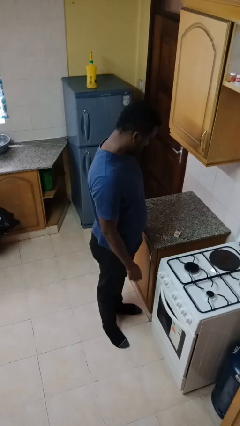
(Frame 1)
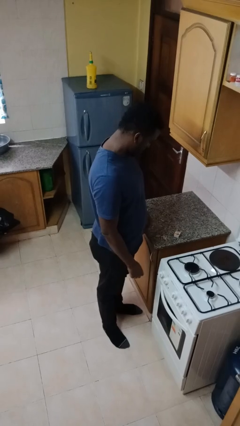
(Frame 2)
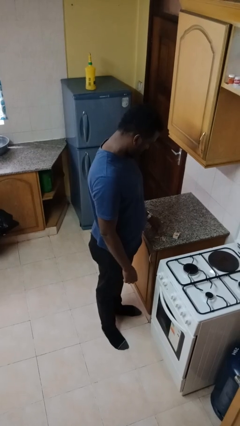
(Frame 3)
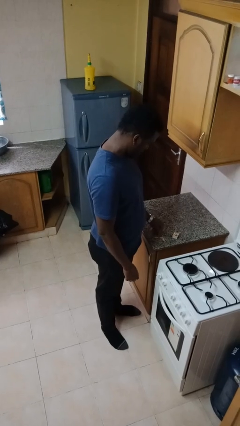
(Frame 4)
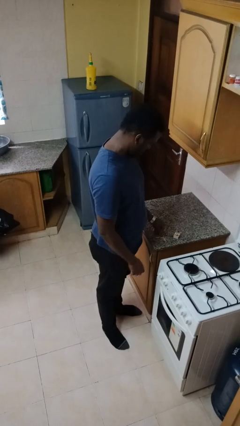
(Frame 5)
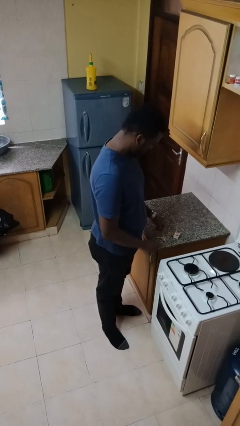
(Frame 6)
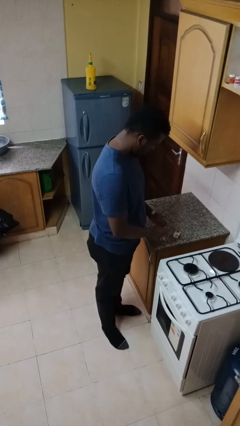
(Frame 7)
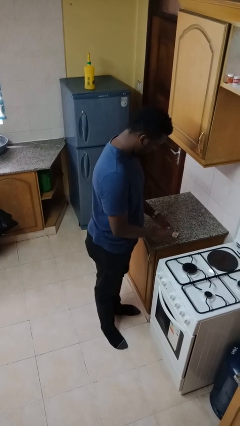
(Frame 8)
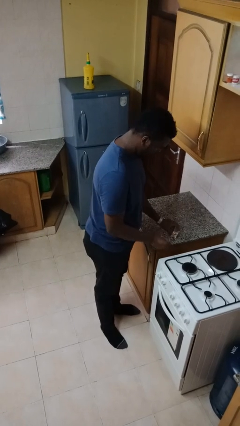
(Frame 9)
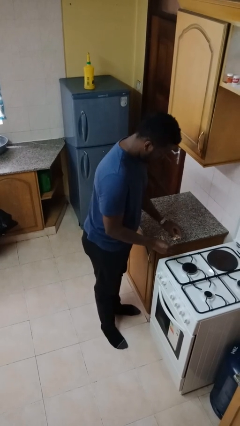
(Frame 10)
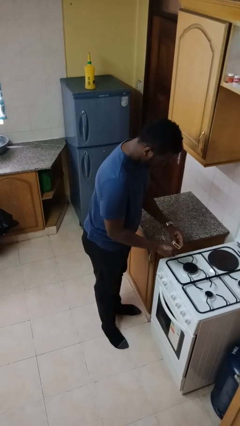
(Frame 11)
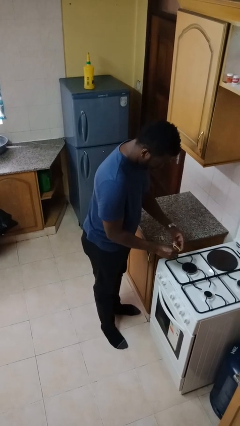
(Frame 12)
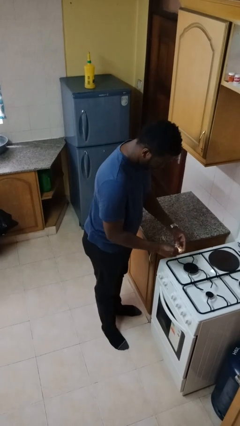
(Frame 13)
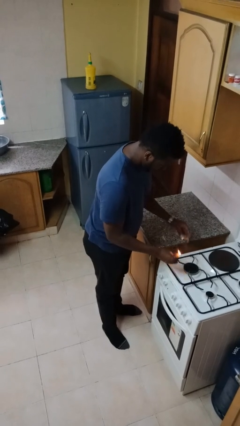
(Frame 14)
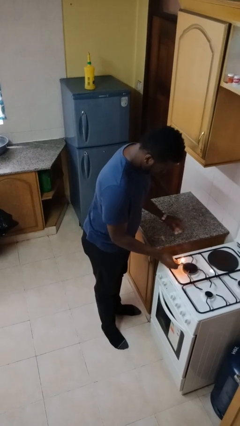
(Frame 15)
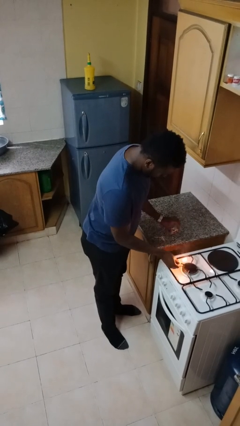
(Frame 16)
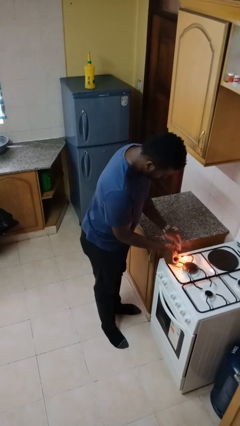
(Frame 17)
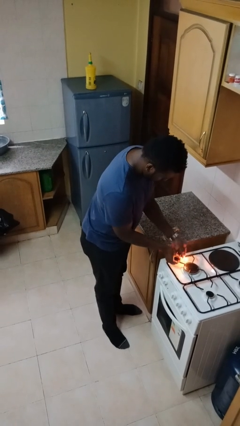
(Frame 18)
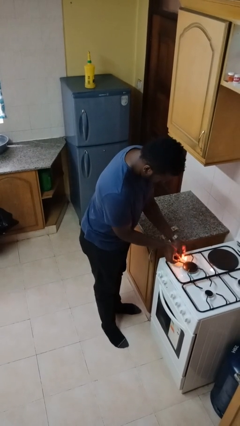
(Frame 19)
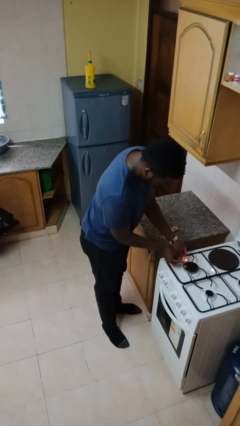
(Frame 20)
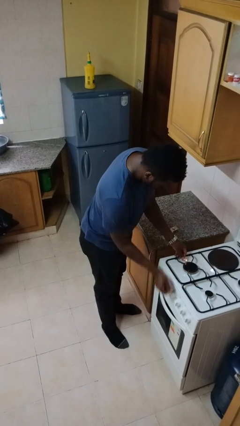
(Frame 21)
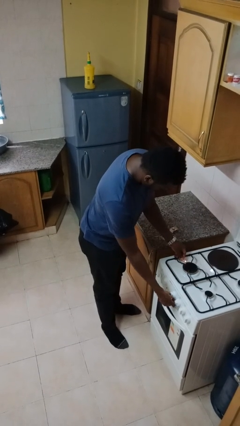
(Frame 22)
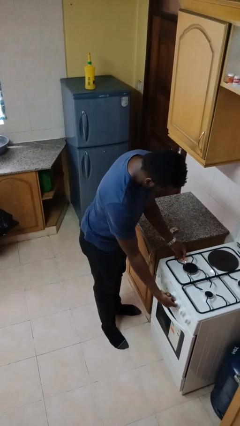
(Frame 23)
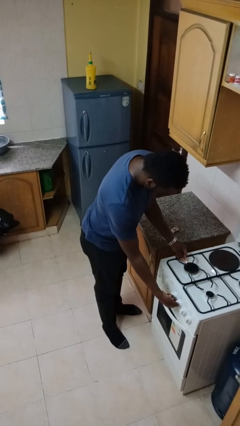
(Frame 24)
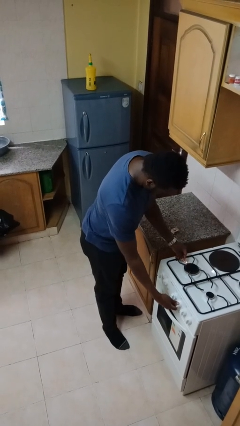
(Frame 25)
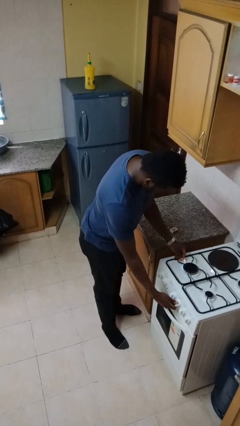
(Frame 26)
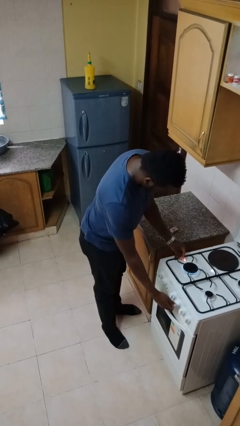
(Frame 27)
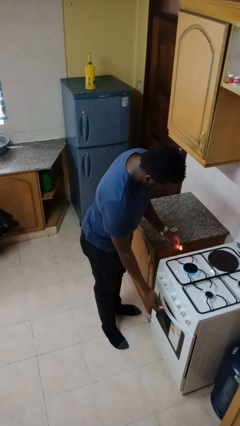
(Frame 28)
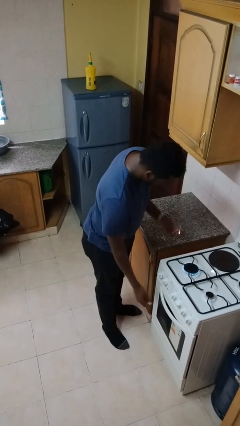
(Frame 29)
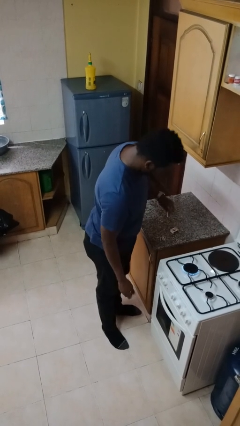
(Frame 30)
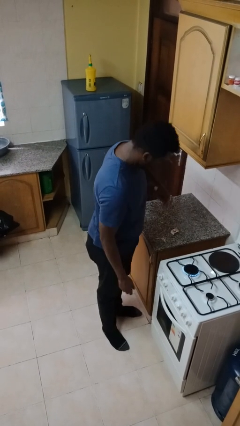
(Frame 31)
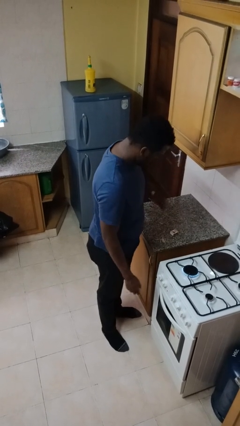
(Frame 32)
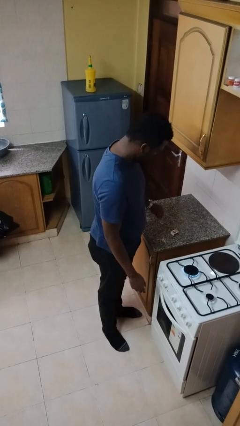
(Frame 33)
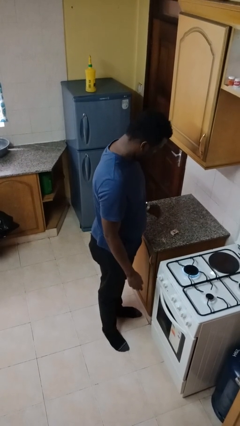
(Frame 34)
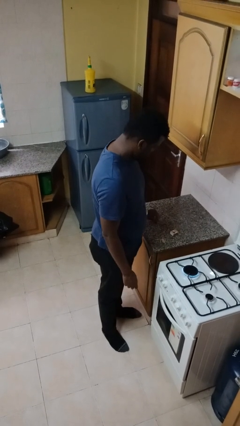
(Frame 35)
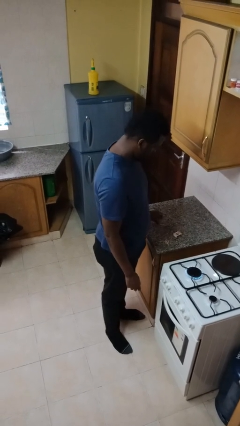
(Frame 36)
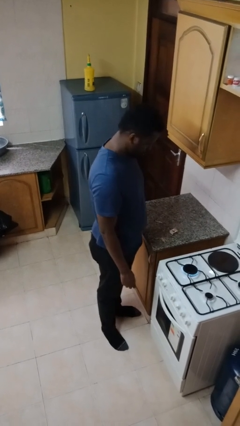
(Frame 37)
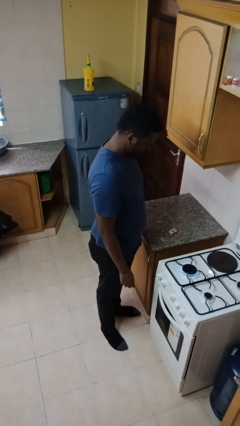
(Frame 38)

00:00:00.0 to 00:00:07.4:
person turns on stovetop

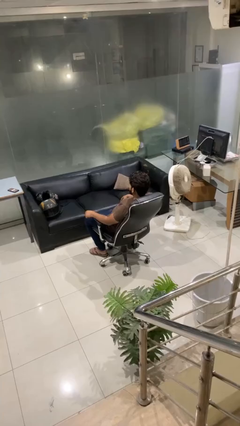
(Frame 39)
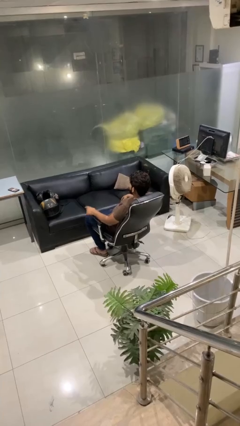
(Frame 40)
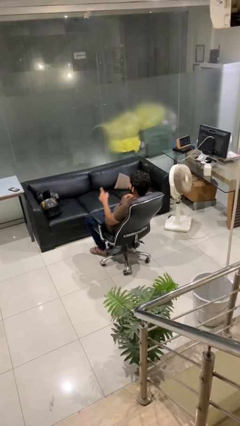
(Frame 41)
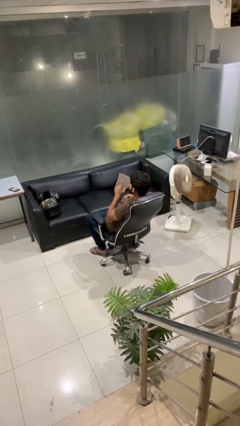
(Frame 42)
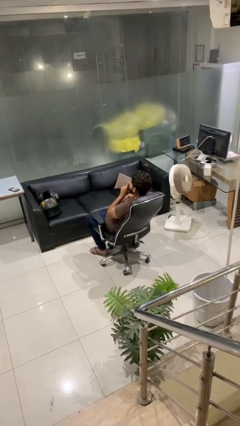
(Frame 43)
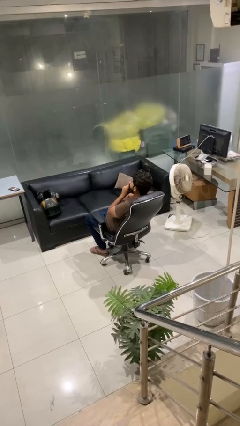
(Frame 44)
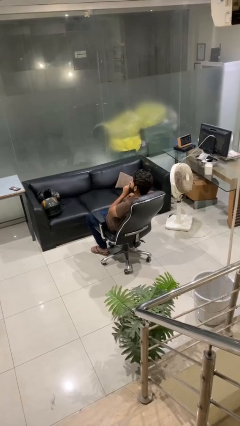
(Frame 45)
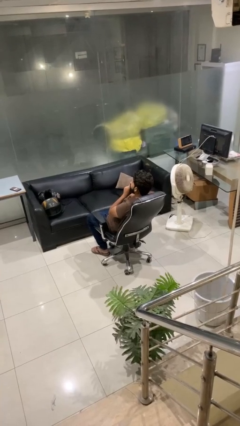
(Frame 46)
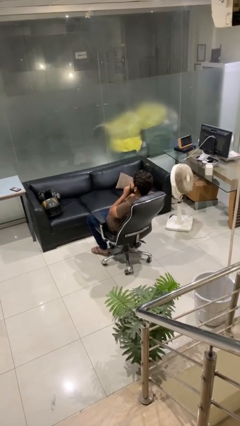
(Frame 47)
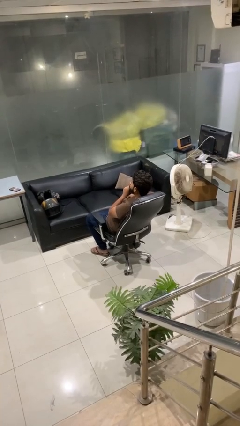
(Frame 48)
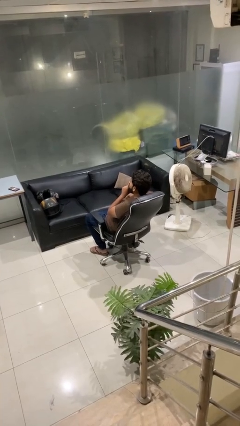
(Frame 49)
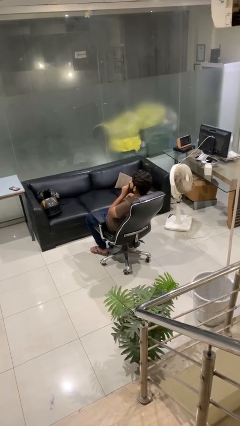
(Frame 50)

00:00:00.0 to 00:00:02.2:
person gestures be quiet

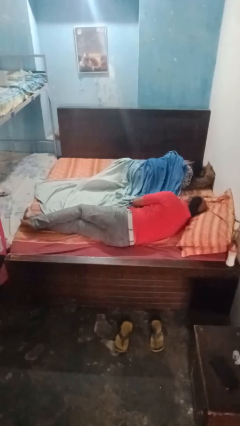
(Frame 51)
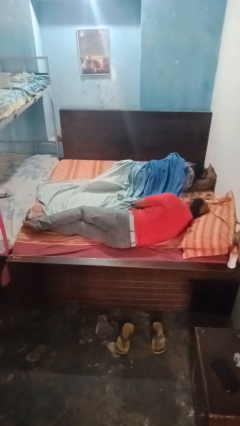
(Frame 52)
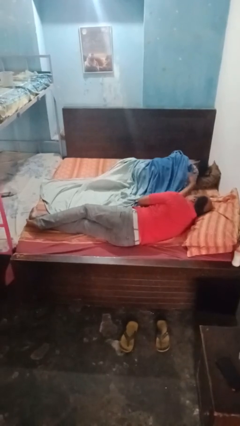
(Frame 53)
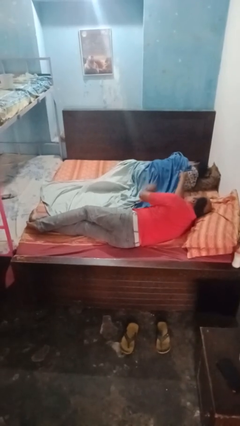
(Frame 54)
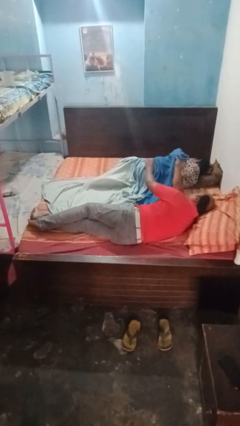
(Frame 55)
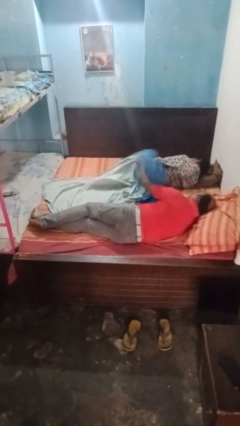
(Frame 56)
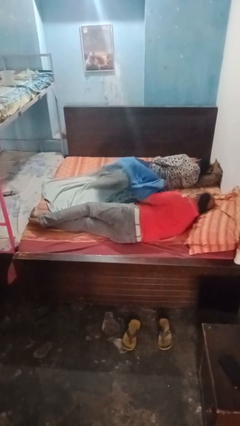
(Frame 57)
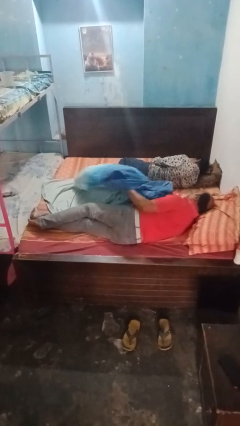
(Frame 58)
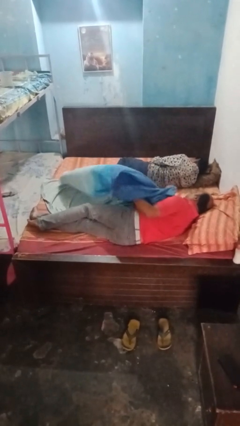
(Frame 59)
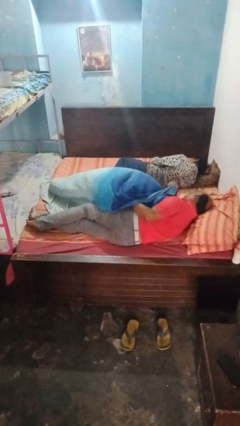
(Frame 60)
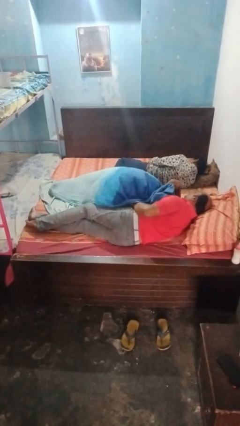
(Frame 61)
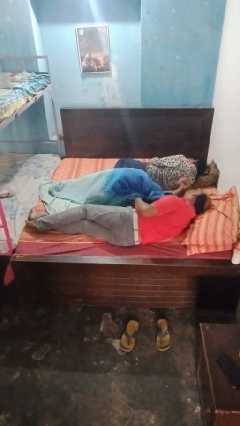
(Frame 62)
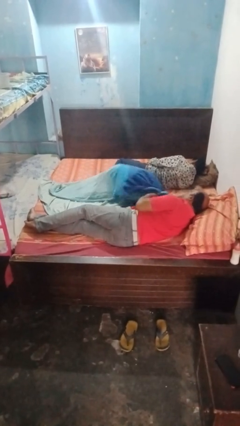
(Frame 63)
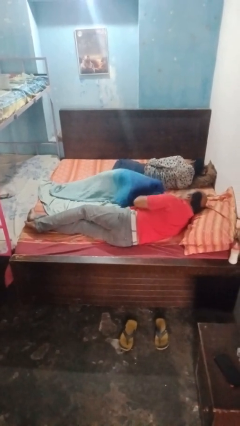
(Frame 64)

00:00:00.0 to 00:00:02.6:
person uncovers friend with blanket

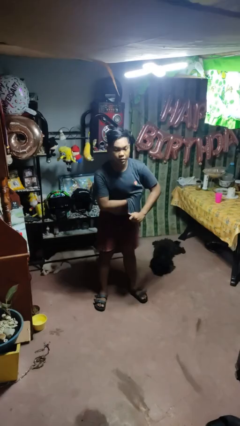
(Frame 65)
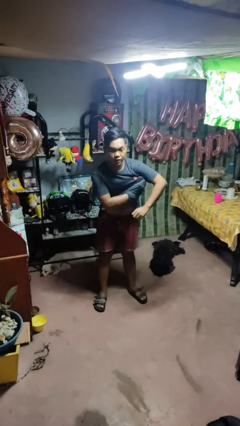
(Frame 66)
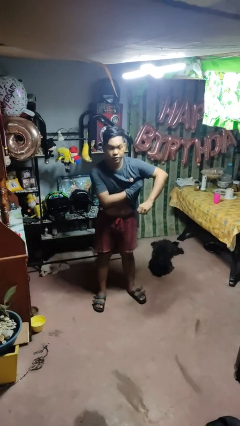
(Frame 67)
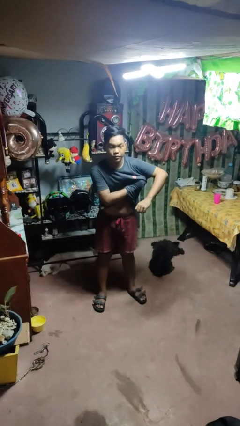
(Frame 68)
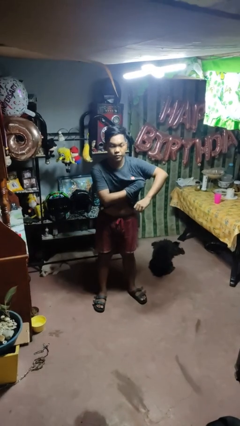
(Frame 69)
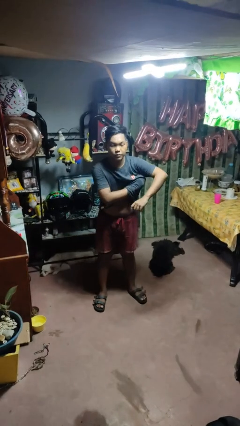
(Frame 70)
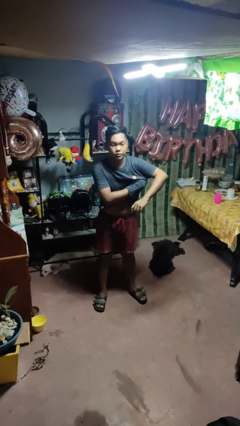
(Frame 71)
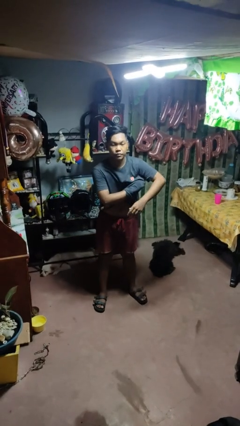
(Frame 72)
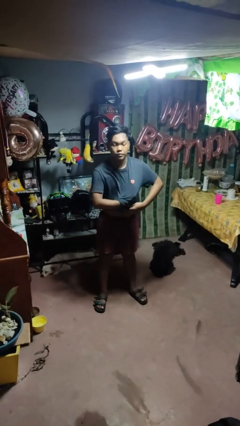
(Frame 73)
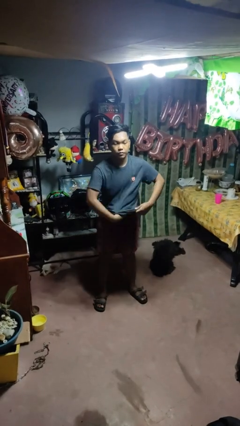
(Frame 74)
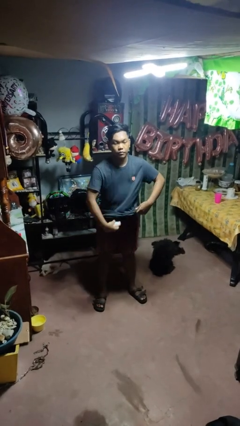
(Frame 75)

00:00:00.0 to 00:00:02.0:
person applies deodorant

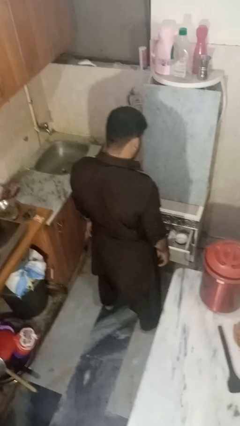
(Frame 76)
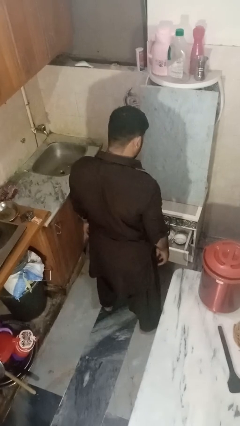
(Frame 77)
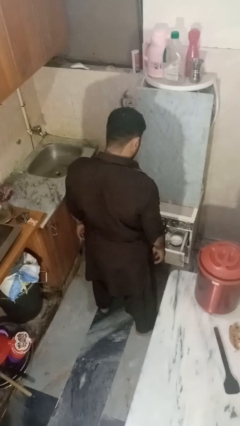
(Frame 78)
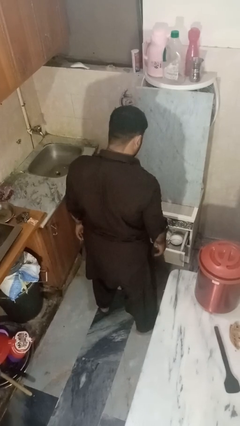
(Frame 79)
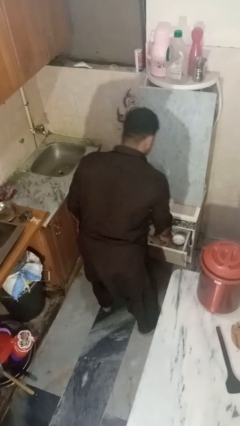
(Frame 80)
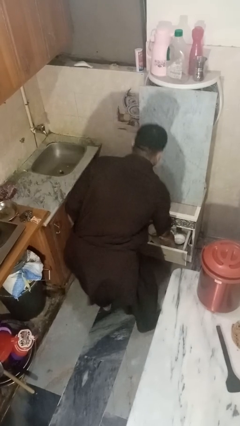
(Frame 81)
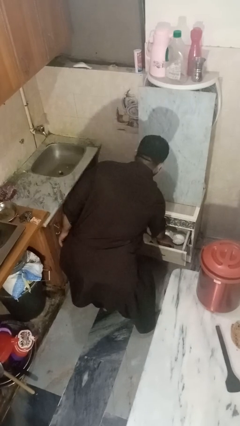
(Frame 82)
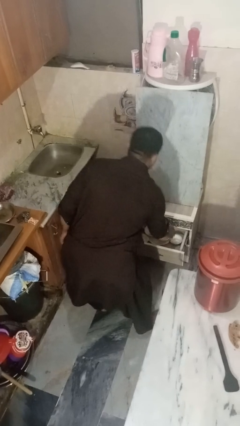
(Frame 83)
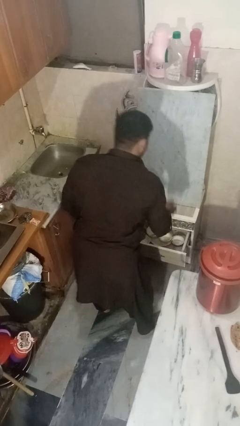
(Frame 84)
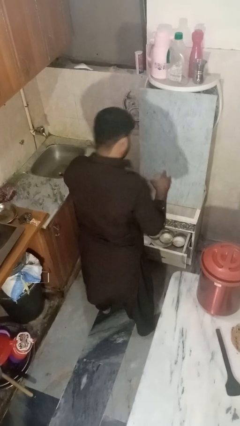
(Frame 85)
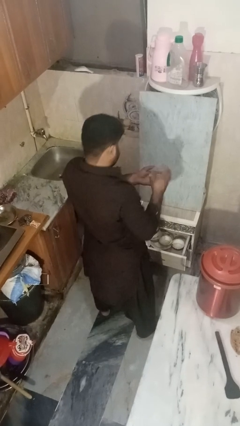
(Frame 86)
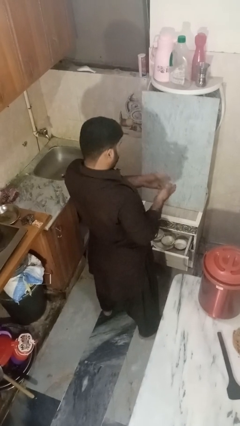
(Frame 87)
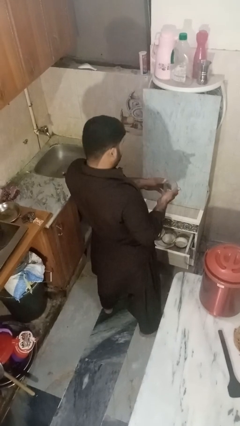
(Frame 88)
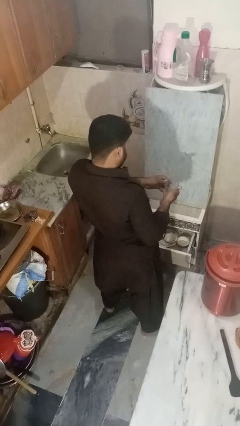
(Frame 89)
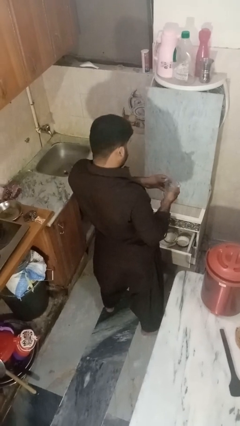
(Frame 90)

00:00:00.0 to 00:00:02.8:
person takes object from kitchen drawer

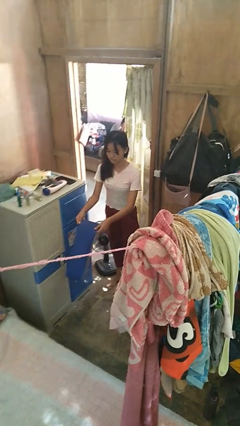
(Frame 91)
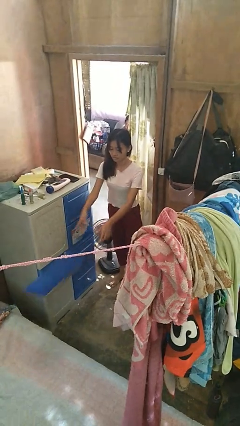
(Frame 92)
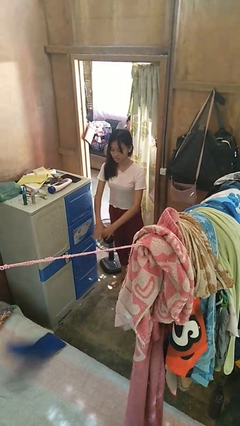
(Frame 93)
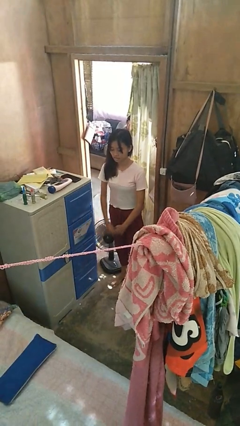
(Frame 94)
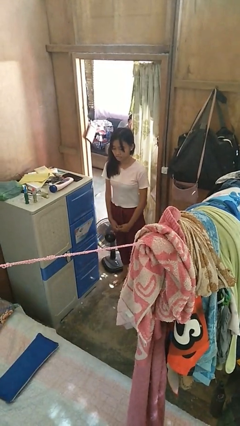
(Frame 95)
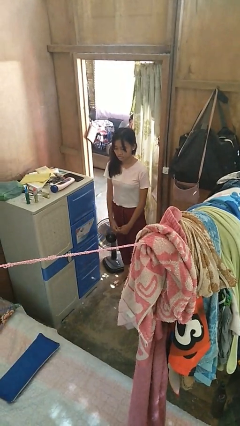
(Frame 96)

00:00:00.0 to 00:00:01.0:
person throws object on bed
